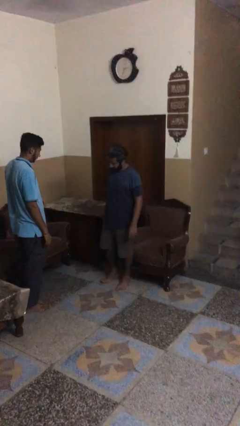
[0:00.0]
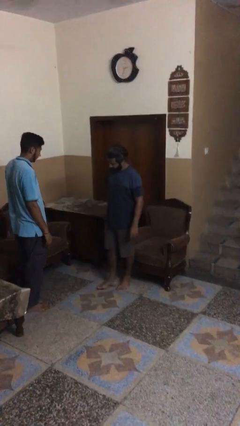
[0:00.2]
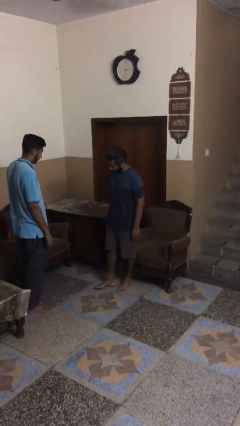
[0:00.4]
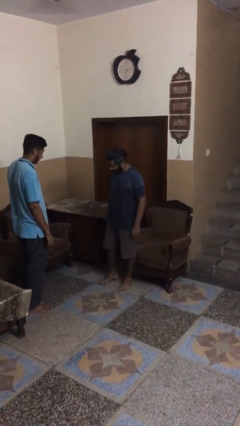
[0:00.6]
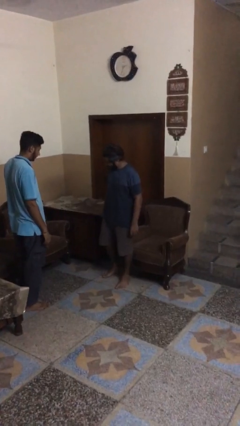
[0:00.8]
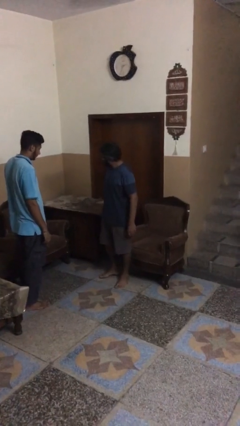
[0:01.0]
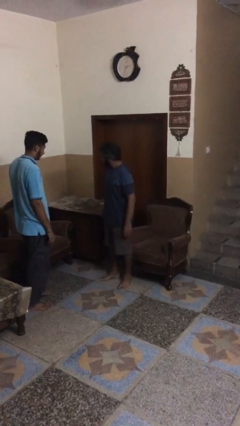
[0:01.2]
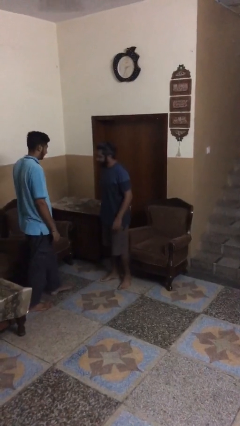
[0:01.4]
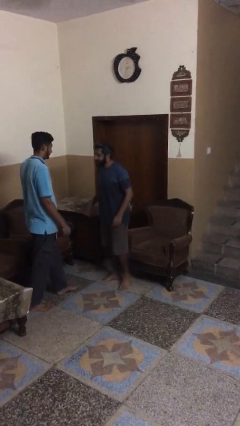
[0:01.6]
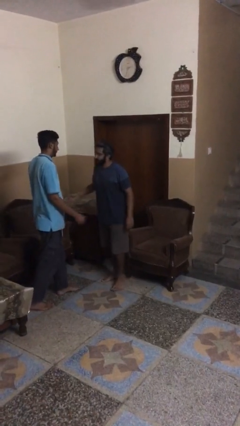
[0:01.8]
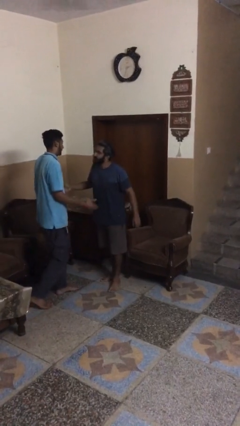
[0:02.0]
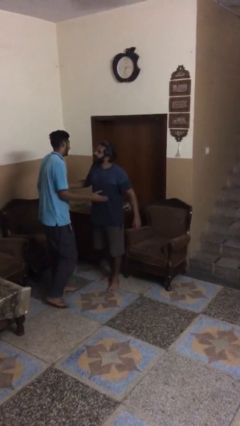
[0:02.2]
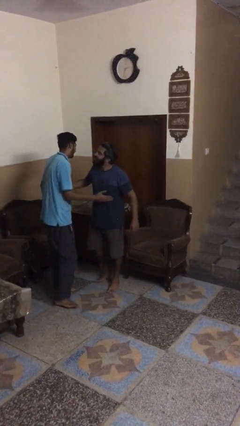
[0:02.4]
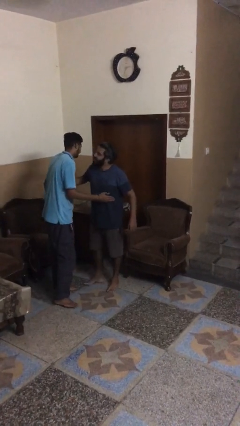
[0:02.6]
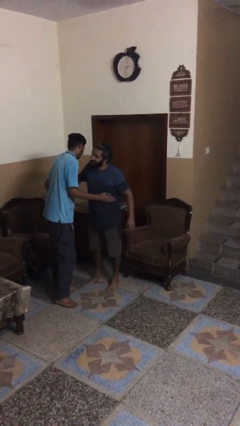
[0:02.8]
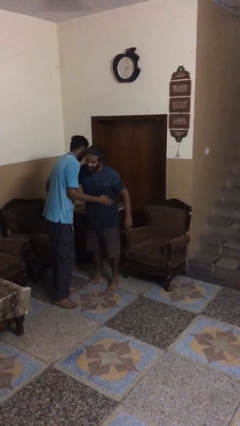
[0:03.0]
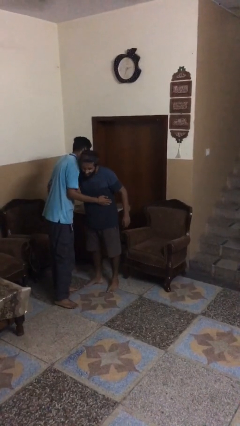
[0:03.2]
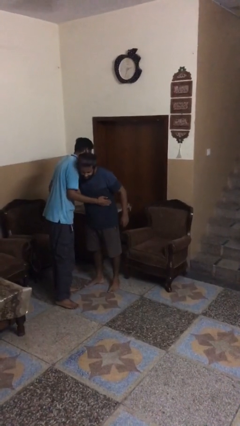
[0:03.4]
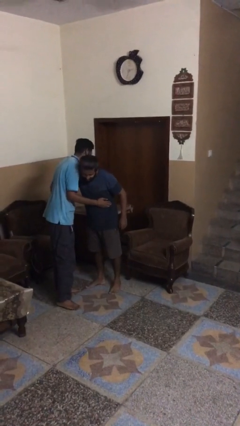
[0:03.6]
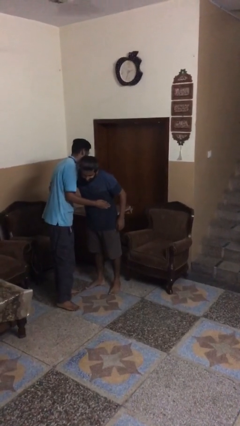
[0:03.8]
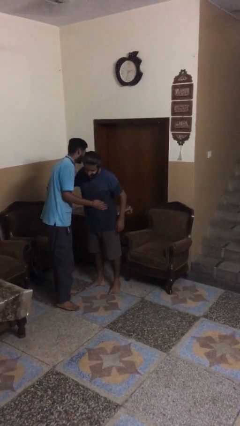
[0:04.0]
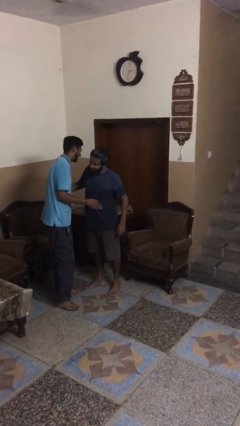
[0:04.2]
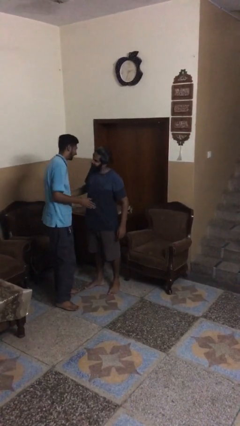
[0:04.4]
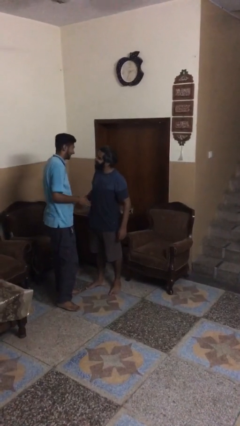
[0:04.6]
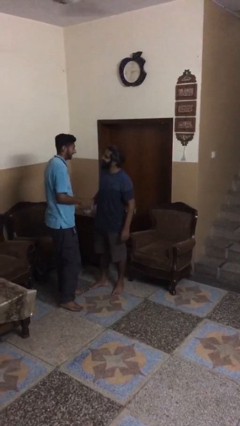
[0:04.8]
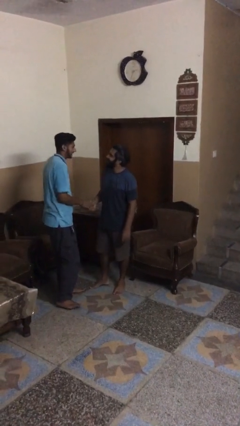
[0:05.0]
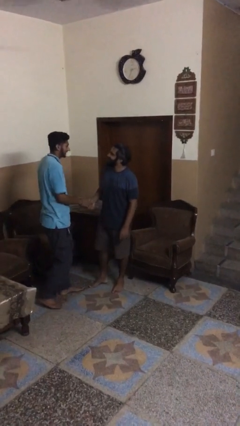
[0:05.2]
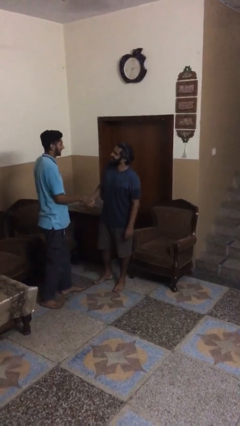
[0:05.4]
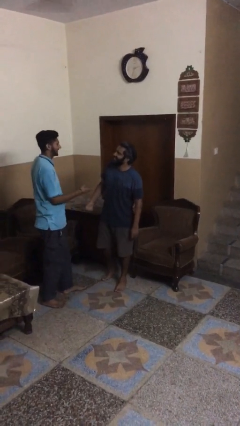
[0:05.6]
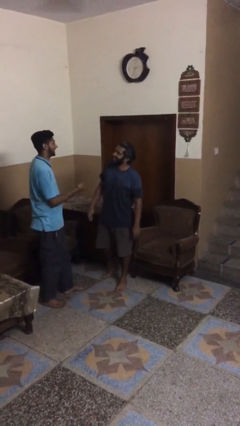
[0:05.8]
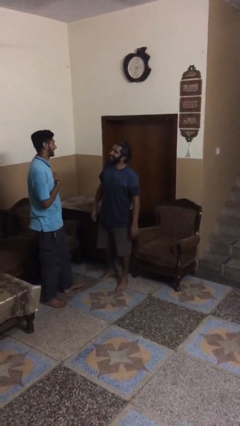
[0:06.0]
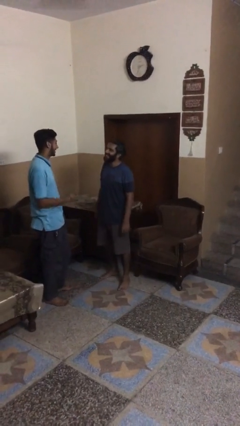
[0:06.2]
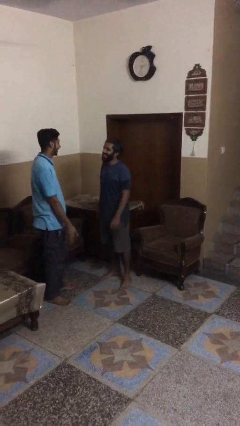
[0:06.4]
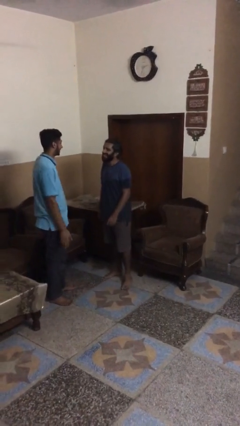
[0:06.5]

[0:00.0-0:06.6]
person embraces person

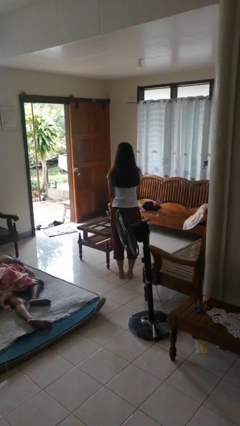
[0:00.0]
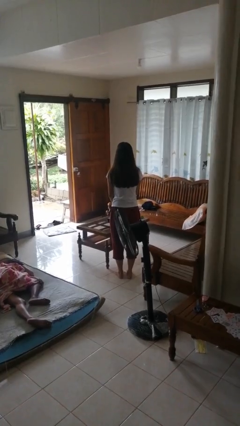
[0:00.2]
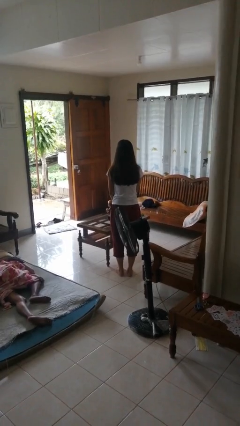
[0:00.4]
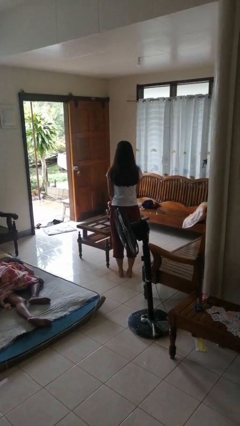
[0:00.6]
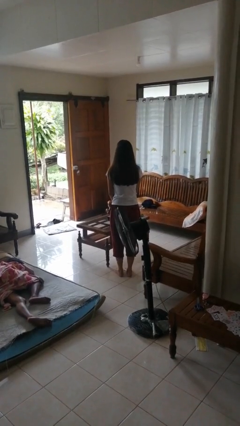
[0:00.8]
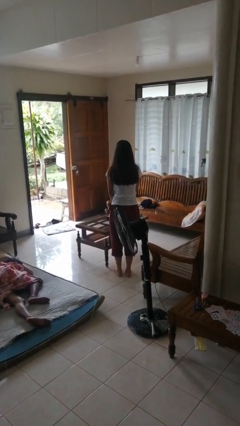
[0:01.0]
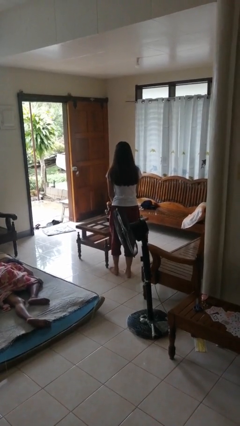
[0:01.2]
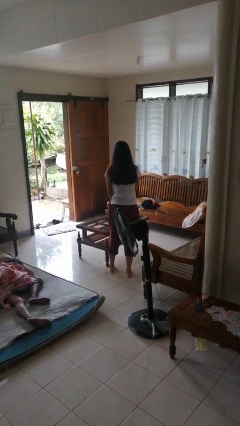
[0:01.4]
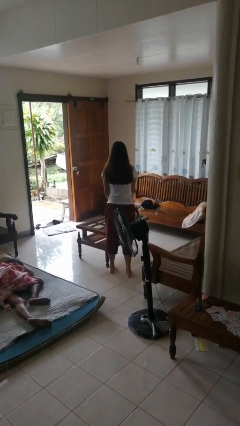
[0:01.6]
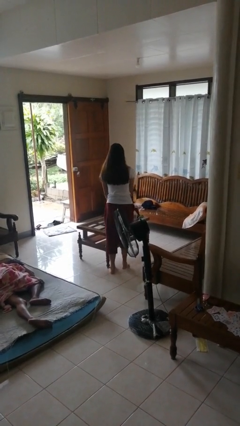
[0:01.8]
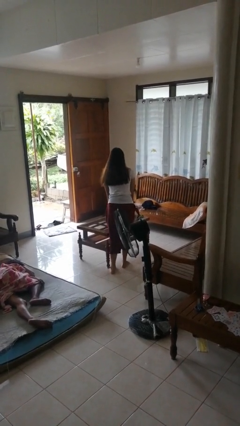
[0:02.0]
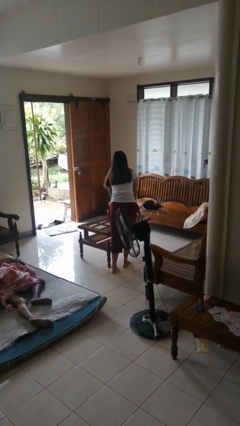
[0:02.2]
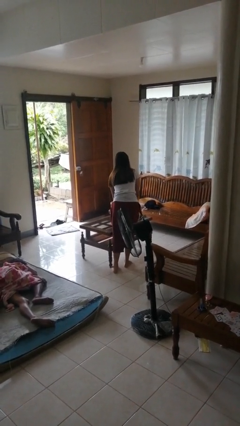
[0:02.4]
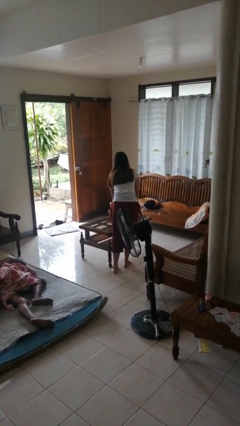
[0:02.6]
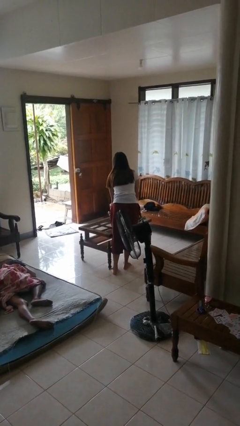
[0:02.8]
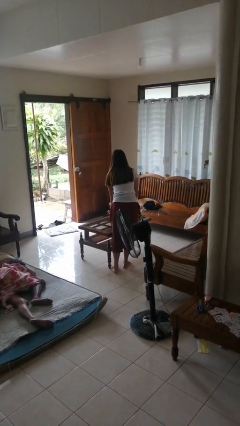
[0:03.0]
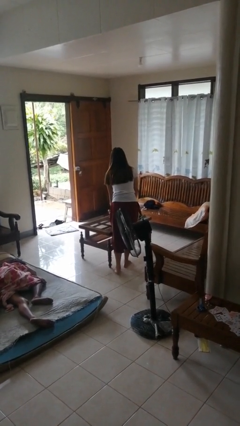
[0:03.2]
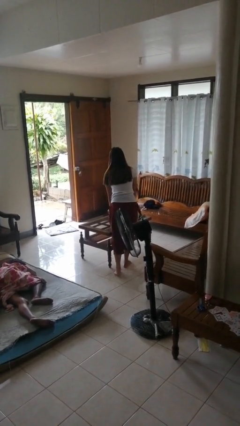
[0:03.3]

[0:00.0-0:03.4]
person bumps into table

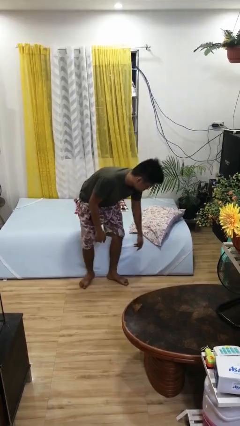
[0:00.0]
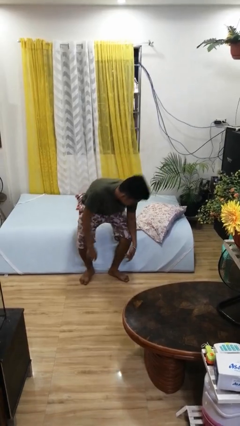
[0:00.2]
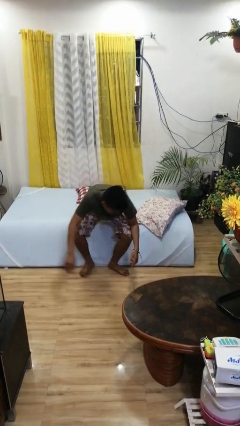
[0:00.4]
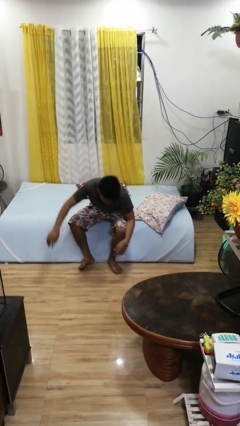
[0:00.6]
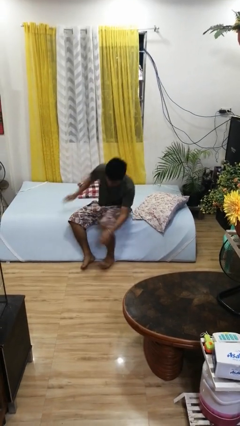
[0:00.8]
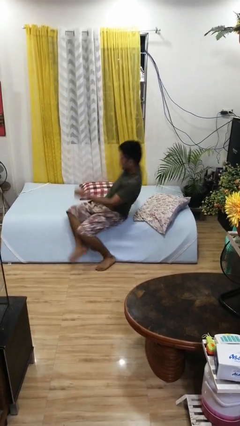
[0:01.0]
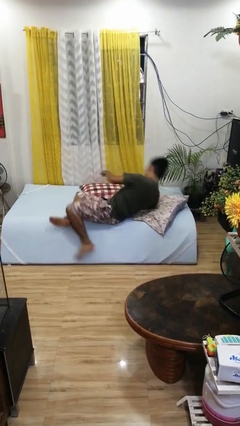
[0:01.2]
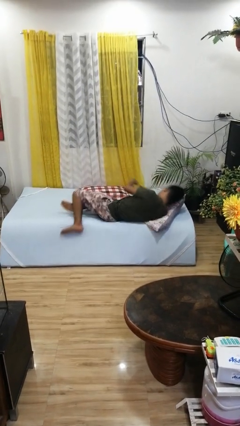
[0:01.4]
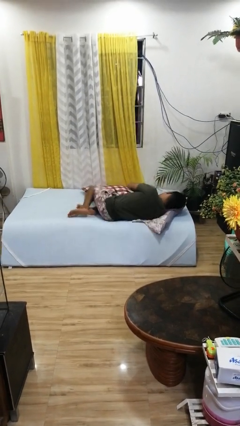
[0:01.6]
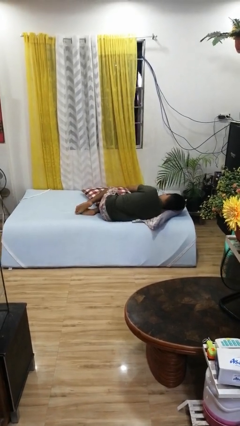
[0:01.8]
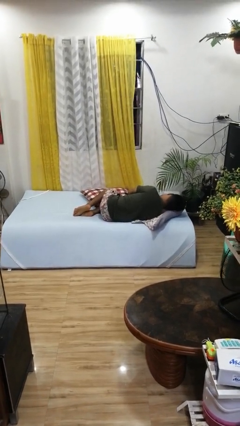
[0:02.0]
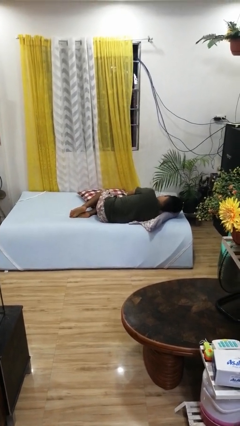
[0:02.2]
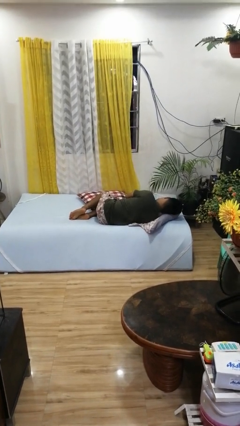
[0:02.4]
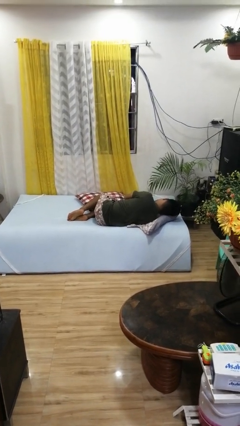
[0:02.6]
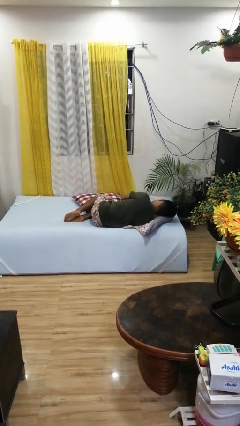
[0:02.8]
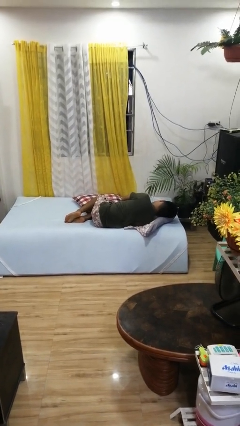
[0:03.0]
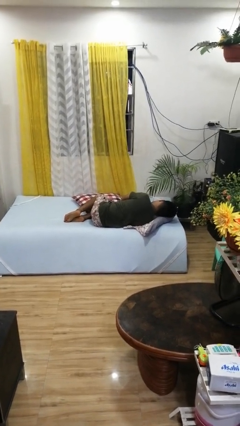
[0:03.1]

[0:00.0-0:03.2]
person lies down on bed

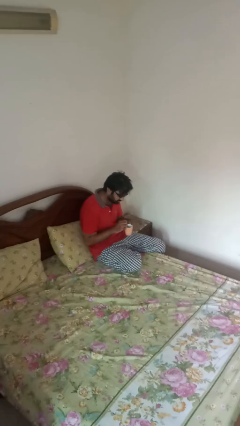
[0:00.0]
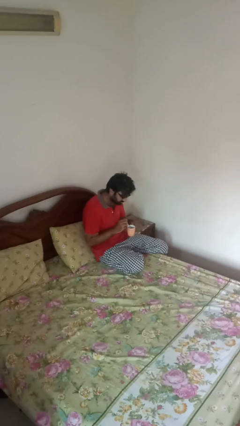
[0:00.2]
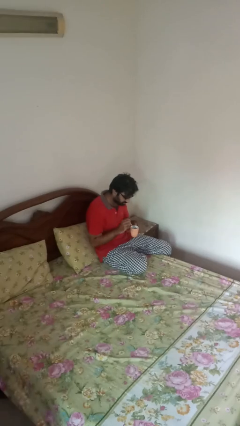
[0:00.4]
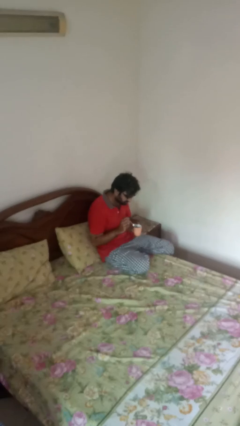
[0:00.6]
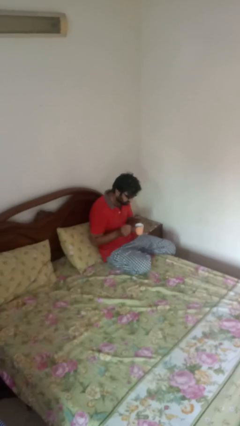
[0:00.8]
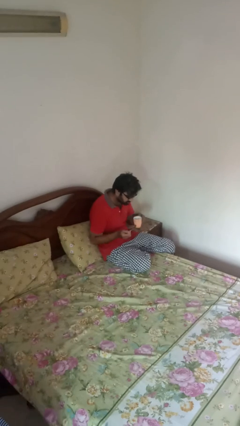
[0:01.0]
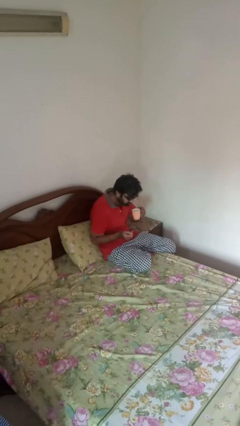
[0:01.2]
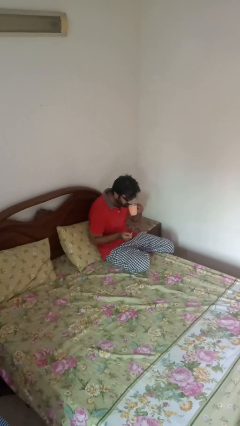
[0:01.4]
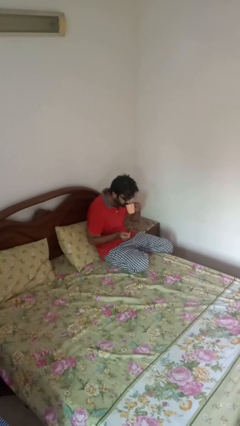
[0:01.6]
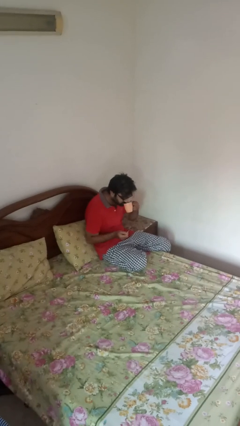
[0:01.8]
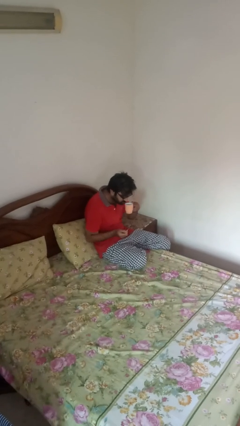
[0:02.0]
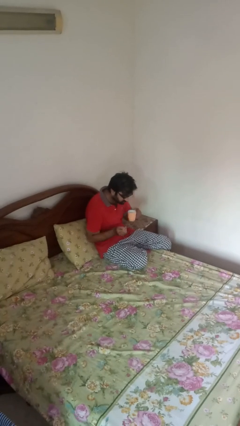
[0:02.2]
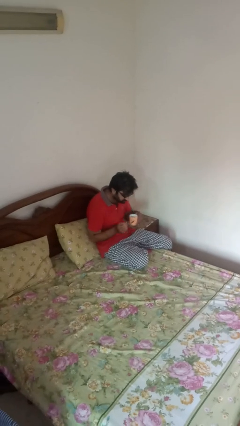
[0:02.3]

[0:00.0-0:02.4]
person drinks from mug

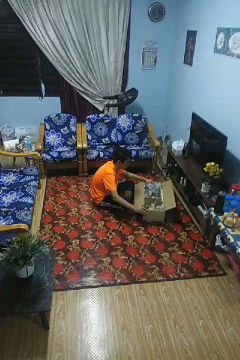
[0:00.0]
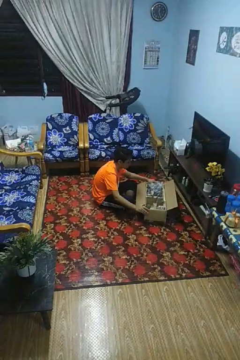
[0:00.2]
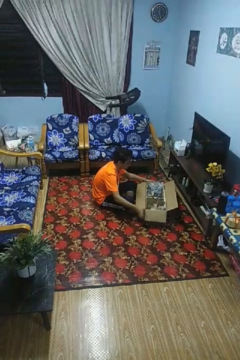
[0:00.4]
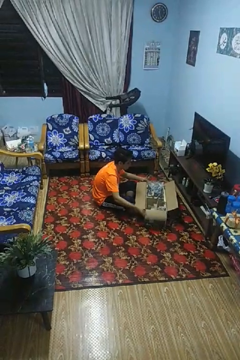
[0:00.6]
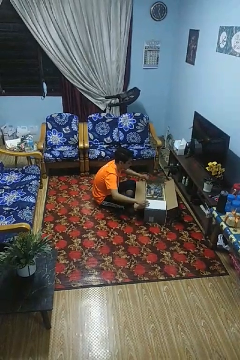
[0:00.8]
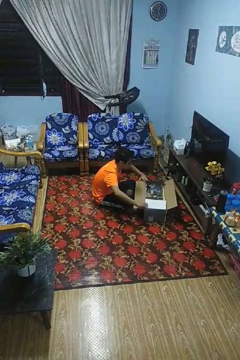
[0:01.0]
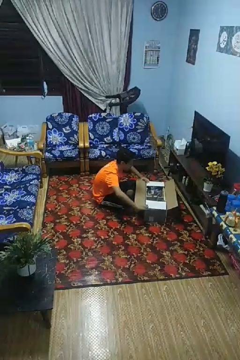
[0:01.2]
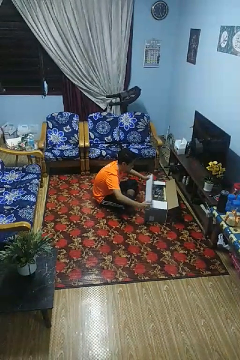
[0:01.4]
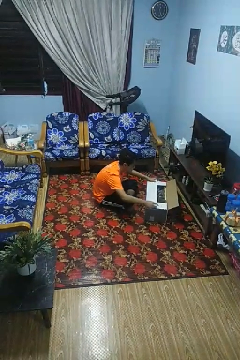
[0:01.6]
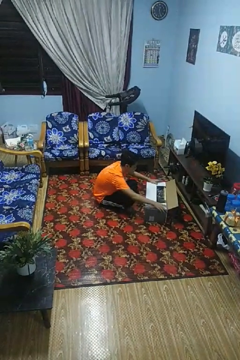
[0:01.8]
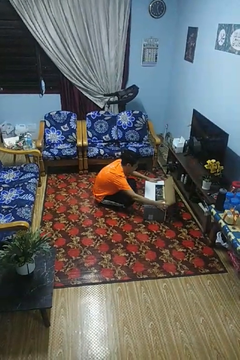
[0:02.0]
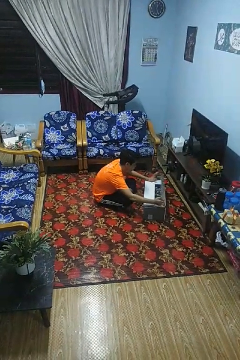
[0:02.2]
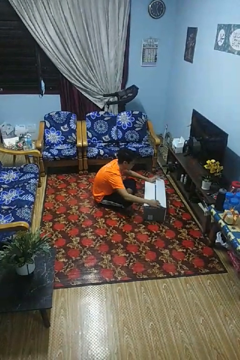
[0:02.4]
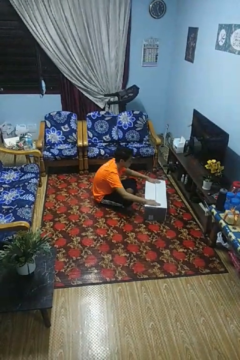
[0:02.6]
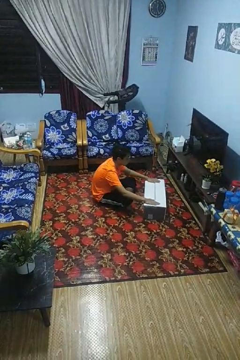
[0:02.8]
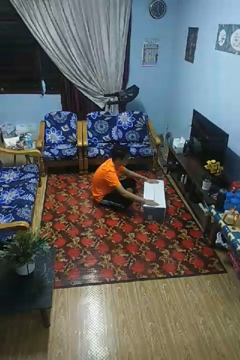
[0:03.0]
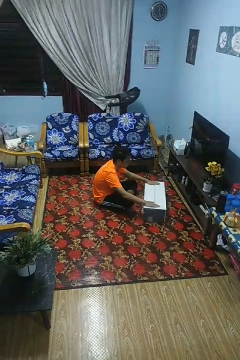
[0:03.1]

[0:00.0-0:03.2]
person closes box
